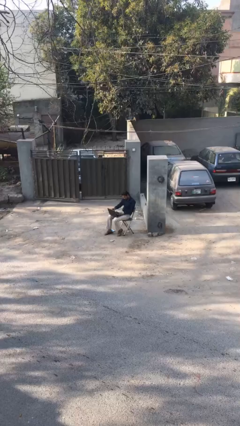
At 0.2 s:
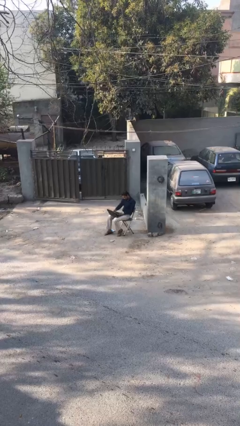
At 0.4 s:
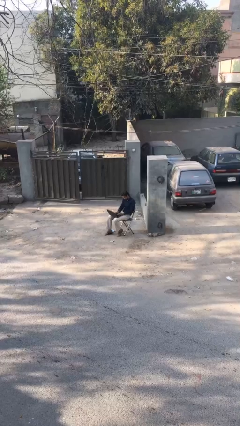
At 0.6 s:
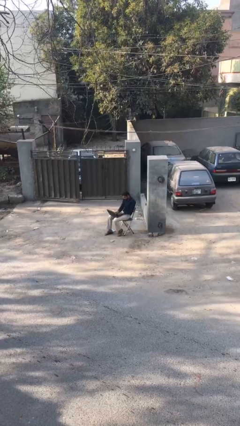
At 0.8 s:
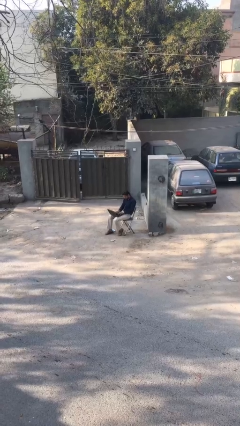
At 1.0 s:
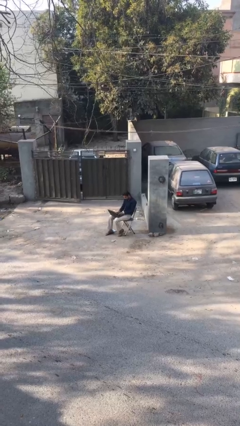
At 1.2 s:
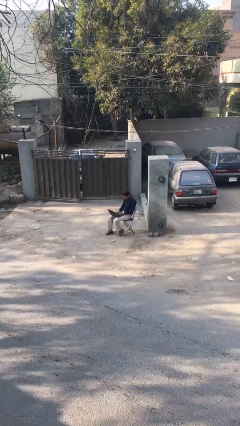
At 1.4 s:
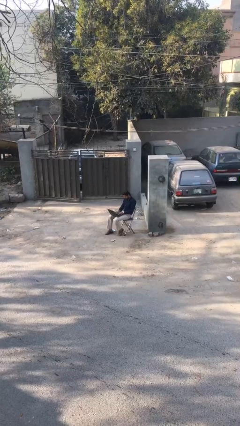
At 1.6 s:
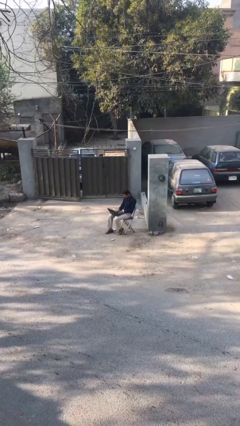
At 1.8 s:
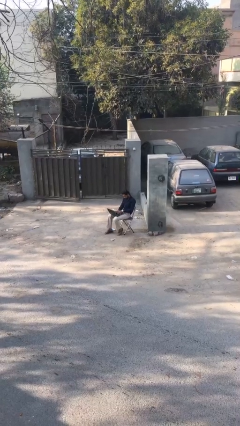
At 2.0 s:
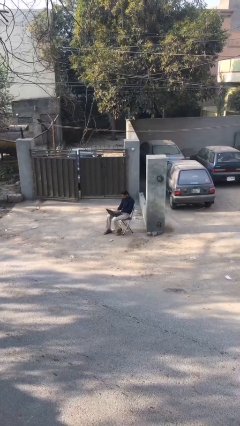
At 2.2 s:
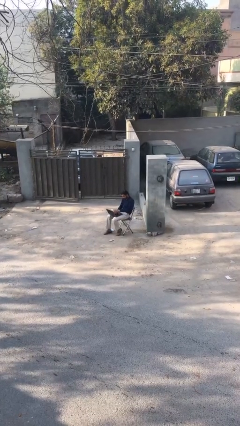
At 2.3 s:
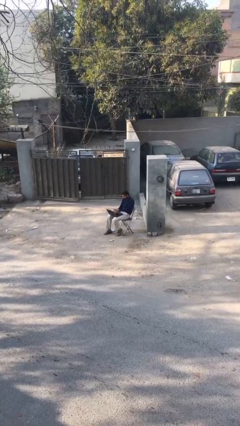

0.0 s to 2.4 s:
person interacts with laptop

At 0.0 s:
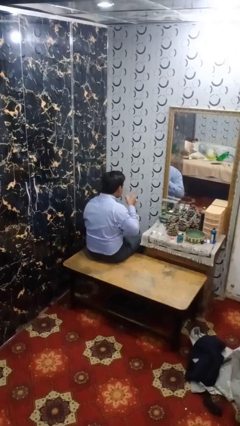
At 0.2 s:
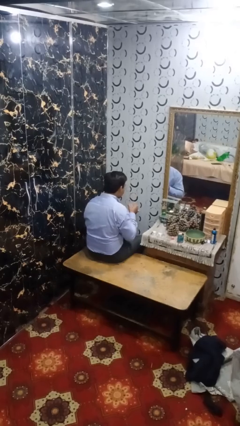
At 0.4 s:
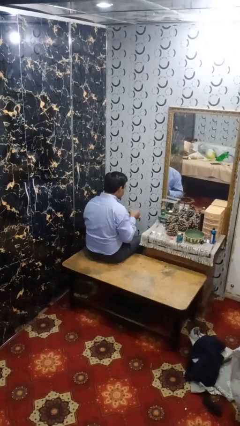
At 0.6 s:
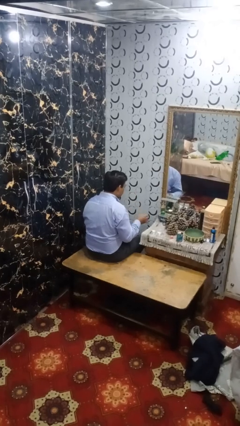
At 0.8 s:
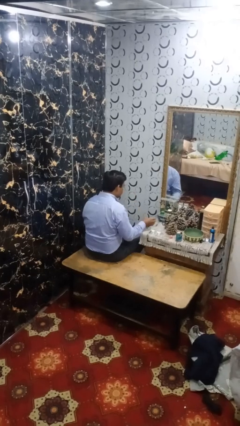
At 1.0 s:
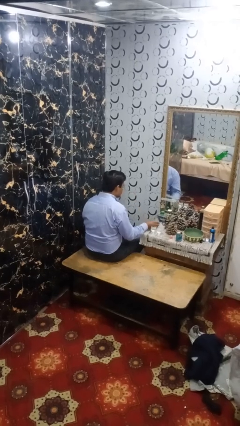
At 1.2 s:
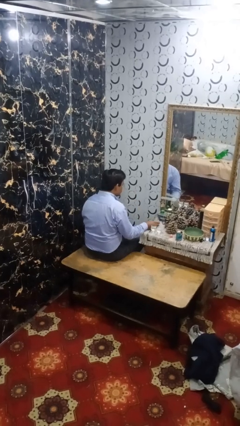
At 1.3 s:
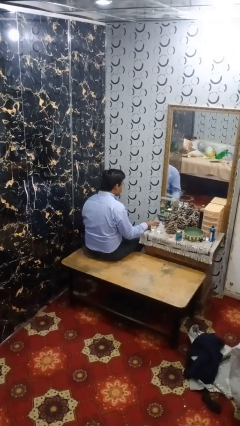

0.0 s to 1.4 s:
person puts down object on table

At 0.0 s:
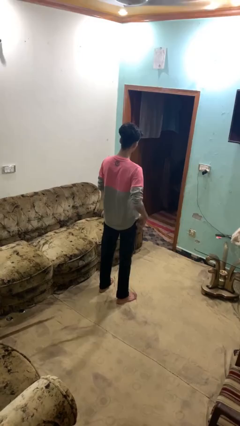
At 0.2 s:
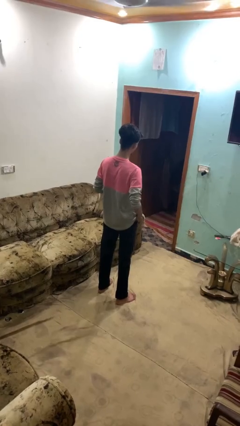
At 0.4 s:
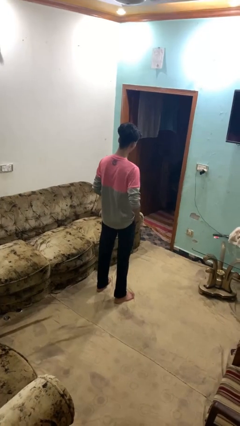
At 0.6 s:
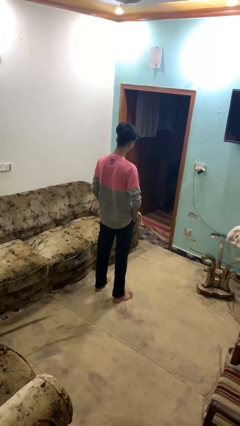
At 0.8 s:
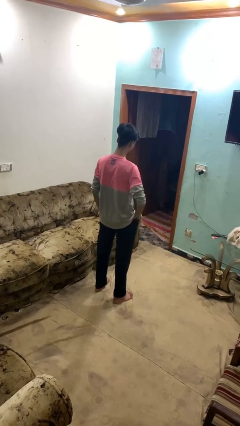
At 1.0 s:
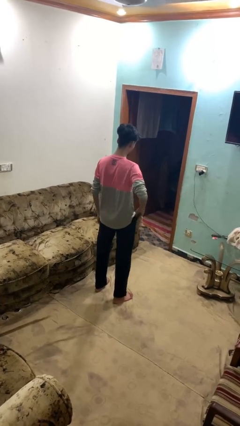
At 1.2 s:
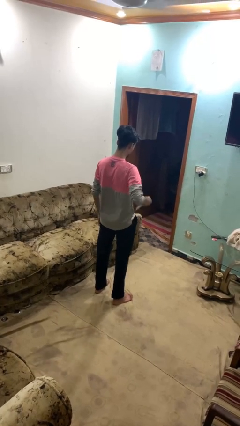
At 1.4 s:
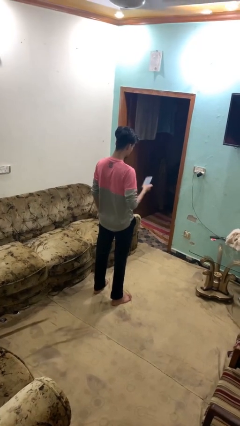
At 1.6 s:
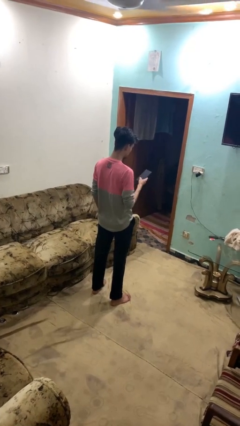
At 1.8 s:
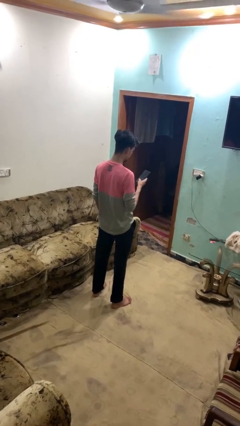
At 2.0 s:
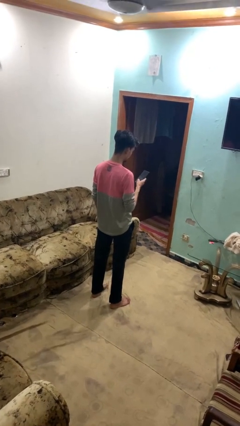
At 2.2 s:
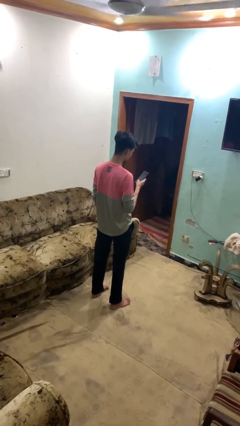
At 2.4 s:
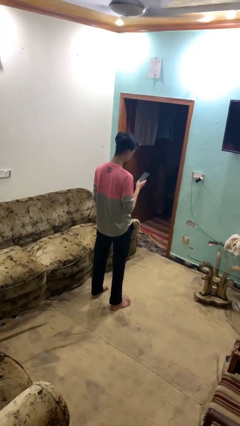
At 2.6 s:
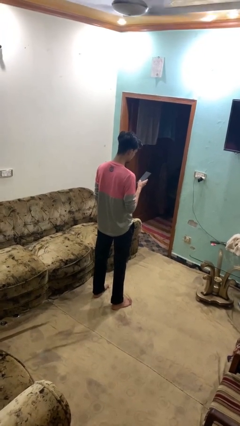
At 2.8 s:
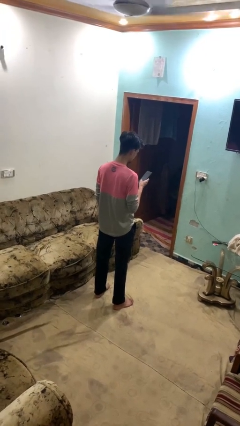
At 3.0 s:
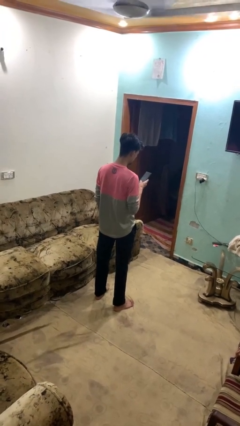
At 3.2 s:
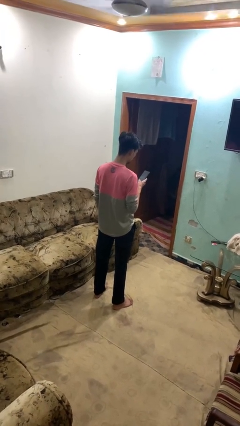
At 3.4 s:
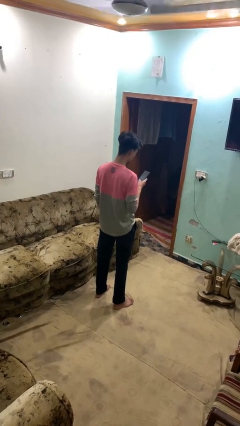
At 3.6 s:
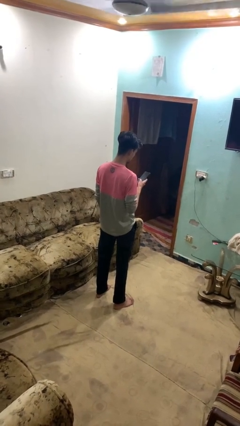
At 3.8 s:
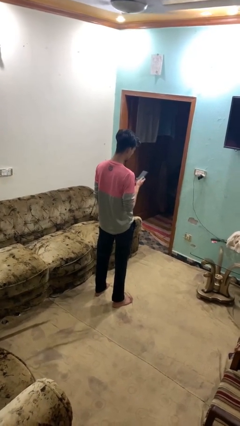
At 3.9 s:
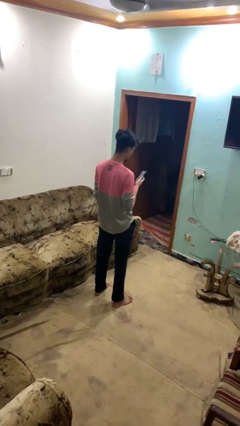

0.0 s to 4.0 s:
person takes phone from pocket

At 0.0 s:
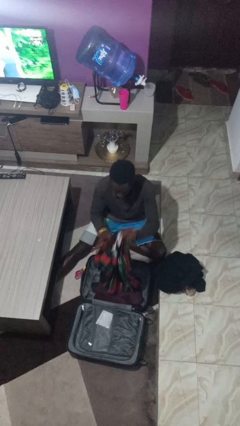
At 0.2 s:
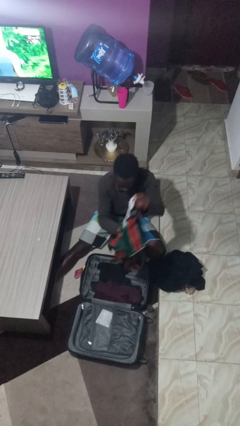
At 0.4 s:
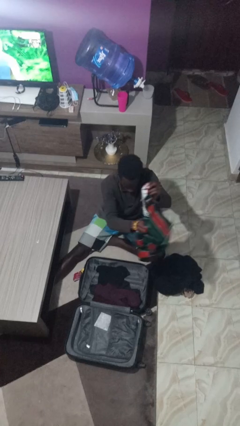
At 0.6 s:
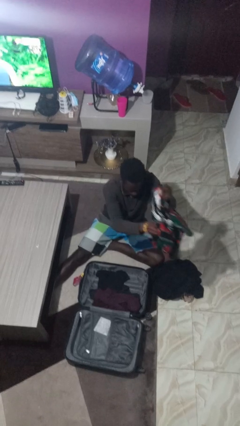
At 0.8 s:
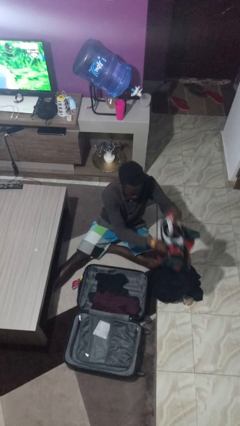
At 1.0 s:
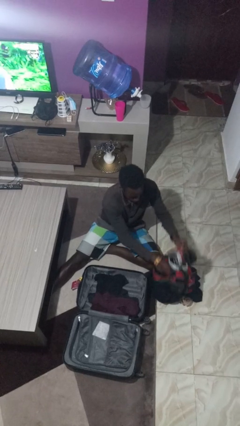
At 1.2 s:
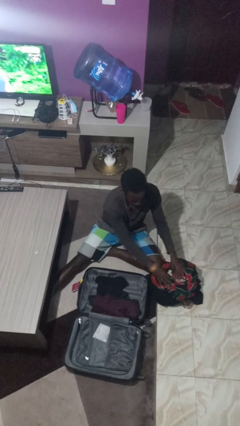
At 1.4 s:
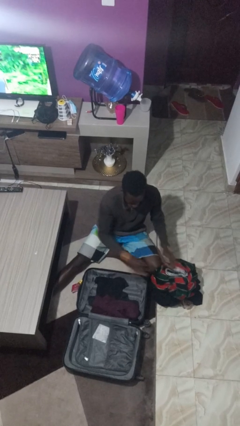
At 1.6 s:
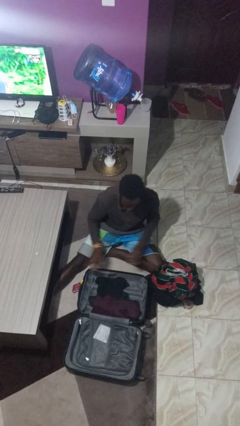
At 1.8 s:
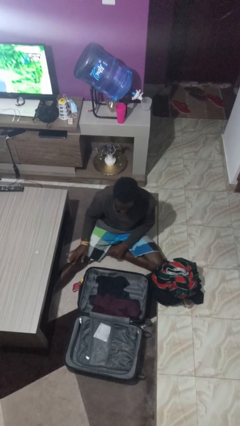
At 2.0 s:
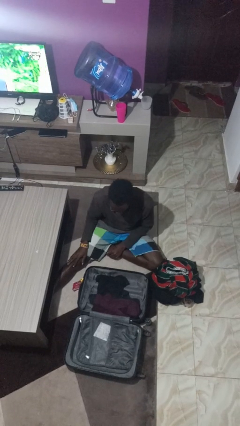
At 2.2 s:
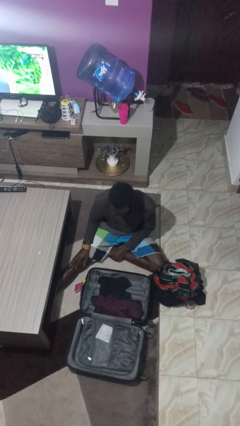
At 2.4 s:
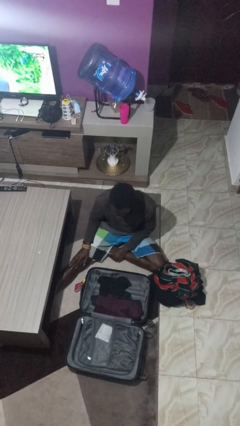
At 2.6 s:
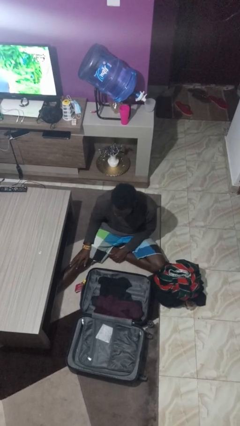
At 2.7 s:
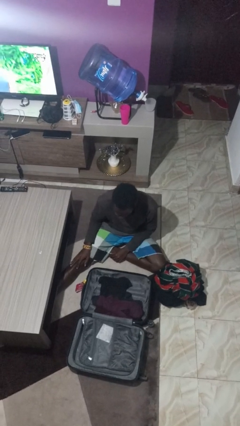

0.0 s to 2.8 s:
person unloads clothes from suitcase

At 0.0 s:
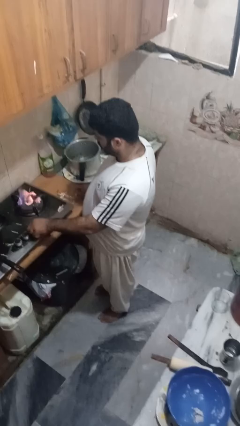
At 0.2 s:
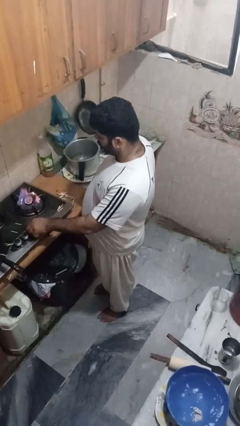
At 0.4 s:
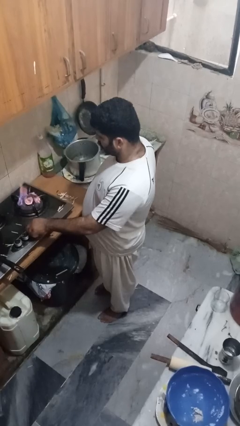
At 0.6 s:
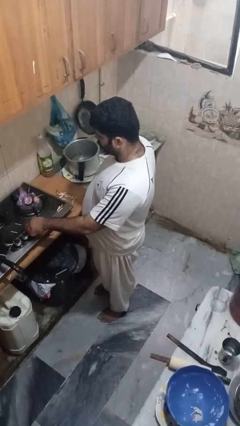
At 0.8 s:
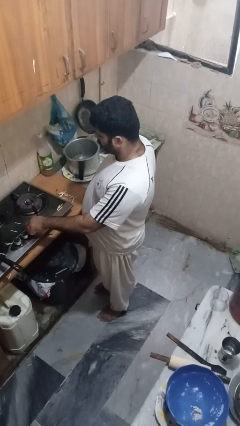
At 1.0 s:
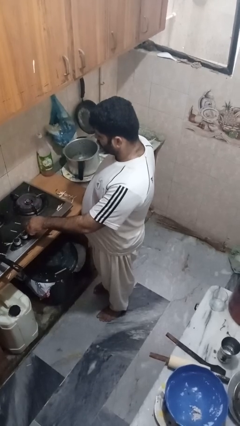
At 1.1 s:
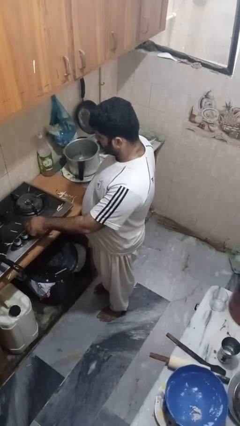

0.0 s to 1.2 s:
person turns off stovetop

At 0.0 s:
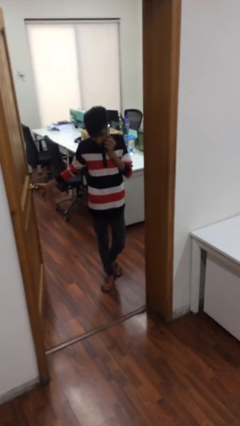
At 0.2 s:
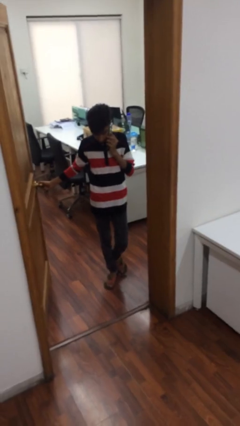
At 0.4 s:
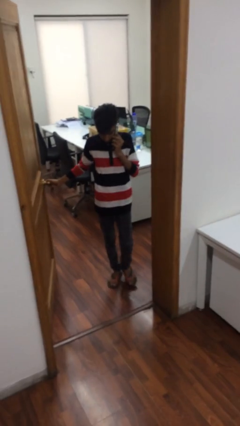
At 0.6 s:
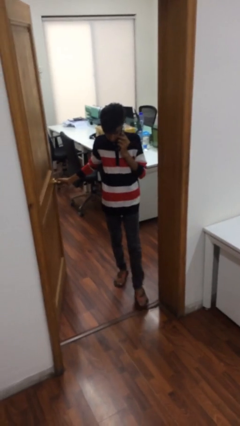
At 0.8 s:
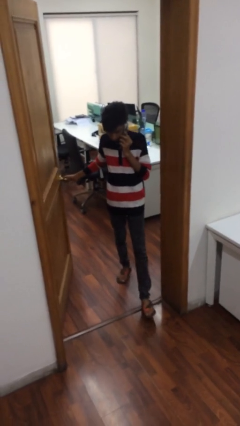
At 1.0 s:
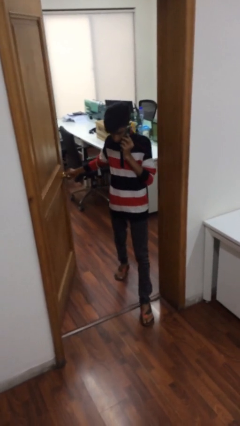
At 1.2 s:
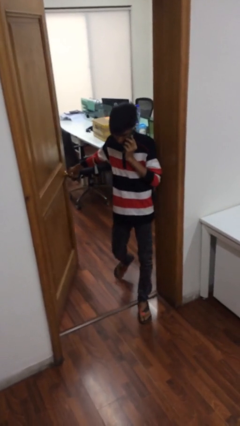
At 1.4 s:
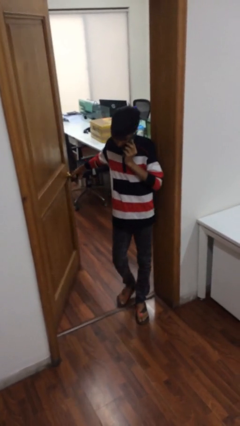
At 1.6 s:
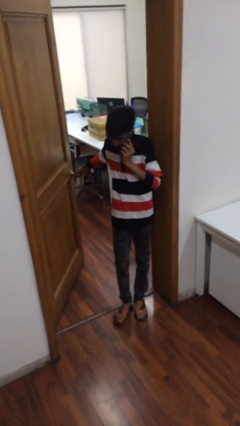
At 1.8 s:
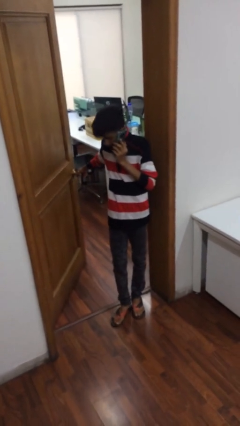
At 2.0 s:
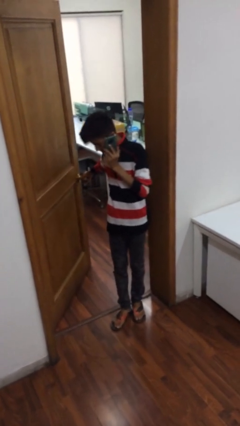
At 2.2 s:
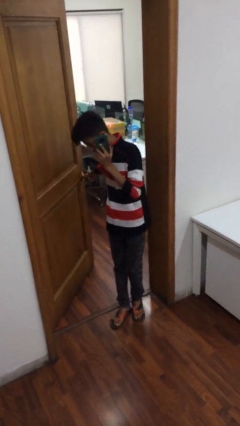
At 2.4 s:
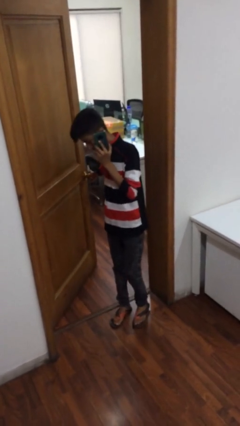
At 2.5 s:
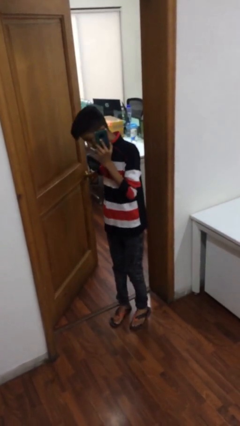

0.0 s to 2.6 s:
person enters scene through structure

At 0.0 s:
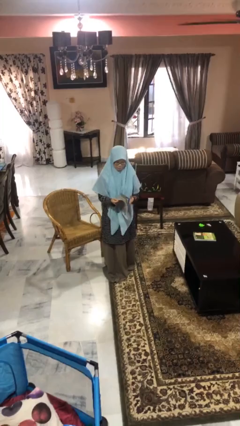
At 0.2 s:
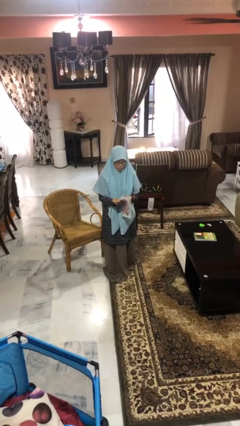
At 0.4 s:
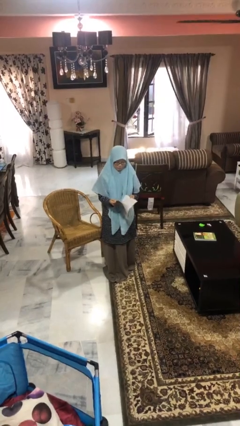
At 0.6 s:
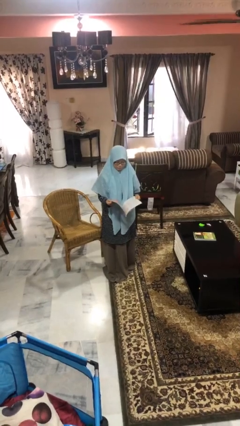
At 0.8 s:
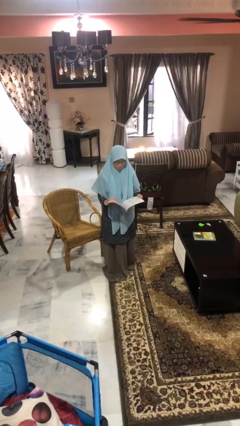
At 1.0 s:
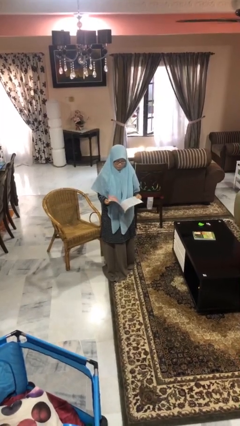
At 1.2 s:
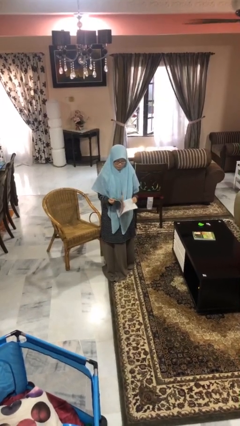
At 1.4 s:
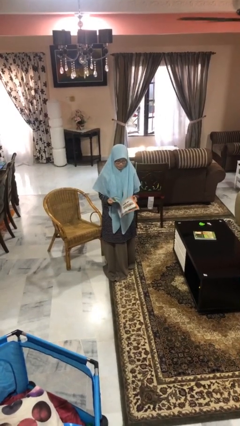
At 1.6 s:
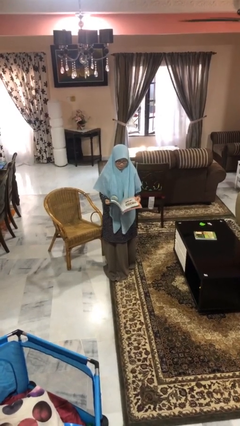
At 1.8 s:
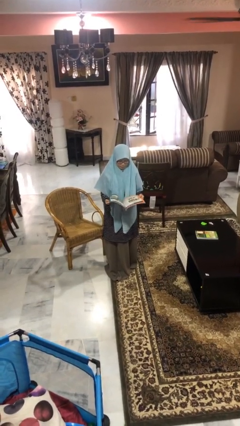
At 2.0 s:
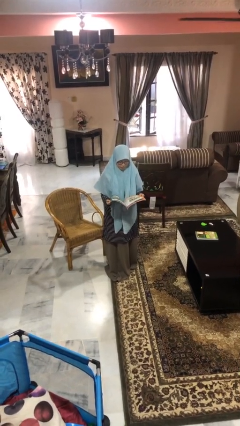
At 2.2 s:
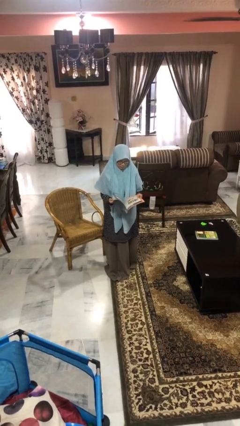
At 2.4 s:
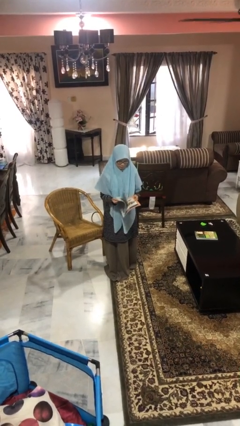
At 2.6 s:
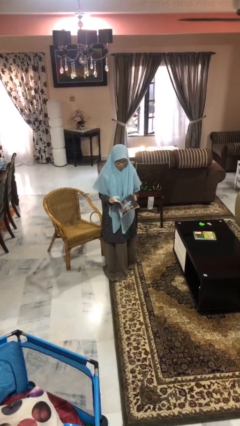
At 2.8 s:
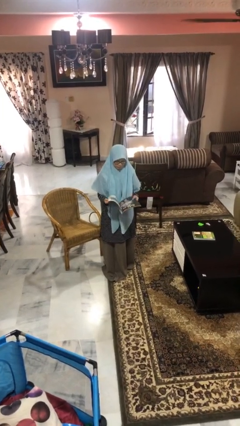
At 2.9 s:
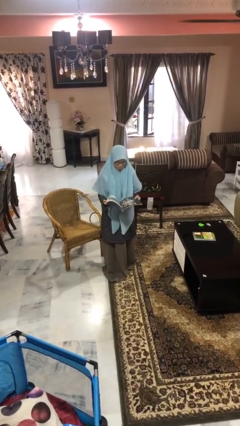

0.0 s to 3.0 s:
person reads magazine
